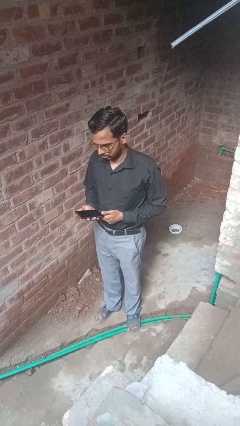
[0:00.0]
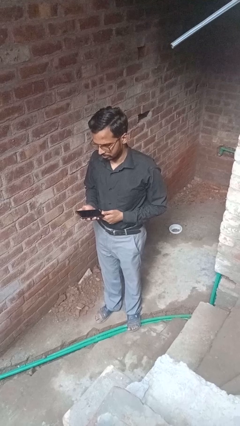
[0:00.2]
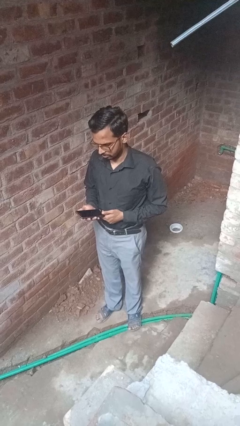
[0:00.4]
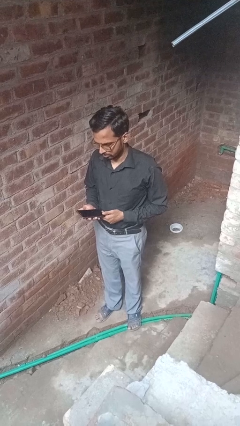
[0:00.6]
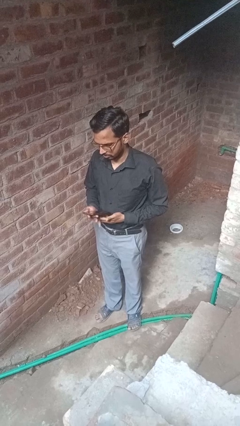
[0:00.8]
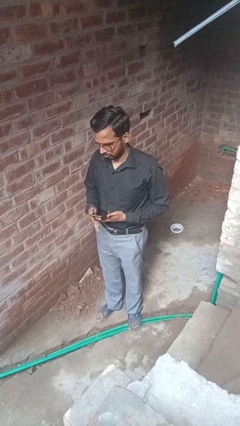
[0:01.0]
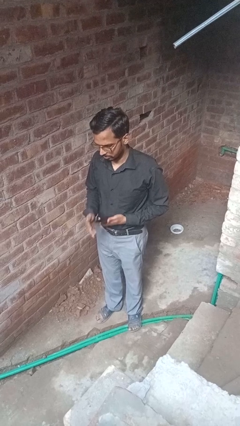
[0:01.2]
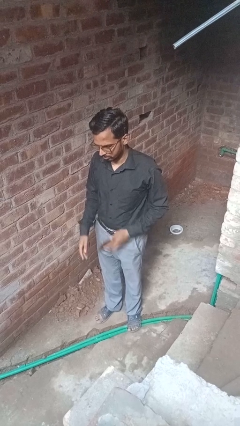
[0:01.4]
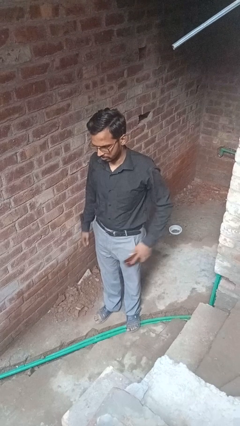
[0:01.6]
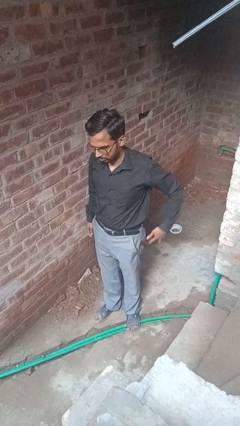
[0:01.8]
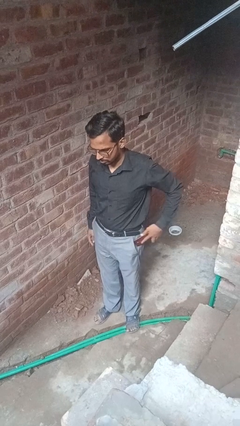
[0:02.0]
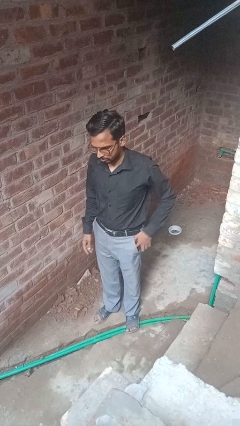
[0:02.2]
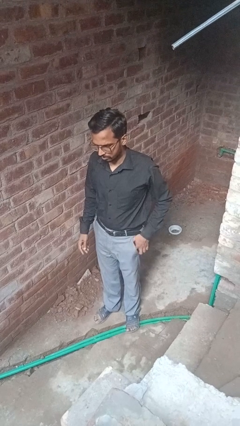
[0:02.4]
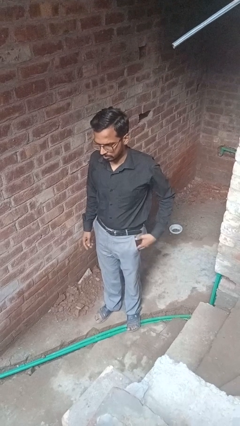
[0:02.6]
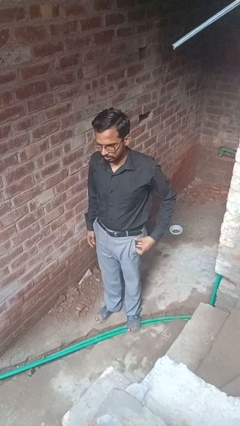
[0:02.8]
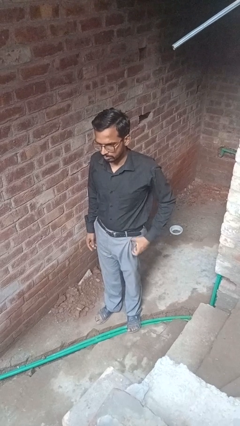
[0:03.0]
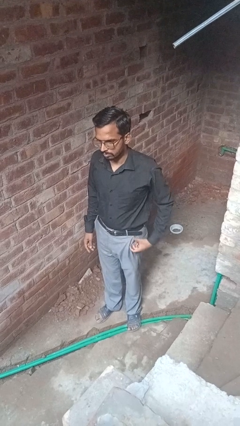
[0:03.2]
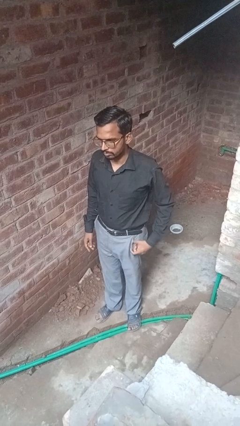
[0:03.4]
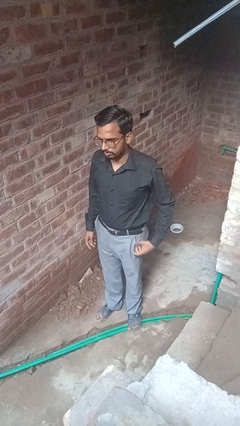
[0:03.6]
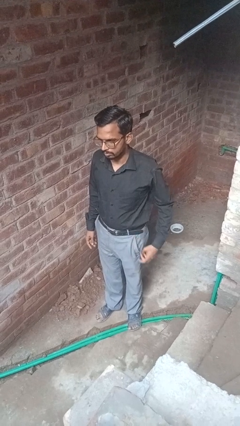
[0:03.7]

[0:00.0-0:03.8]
person puts phone into pocket

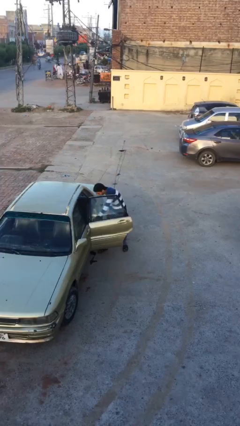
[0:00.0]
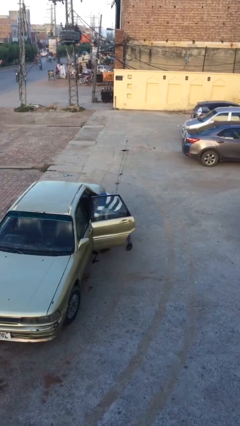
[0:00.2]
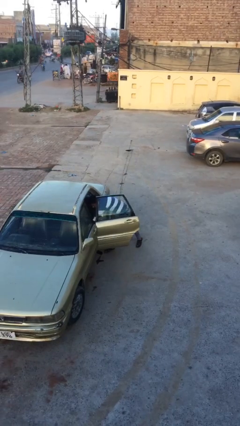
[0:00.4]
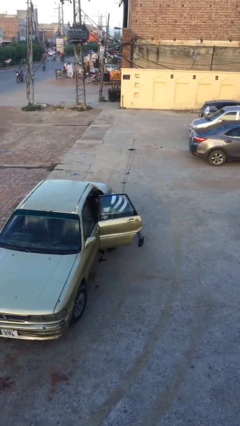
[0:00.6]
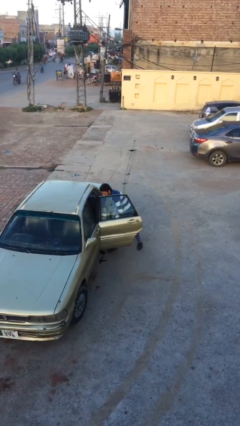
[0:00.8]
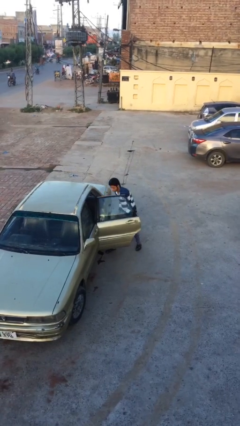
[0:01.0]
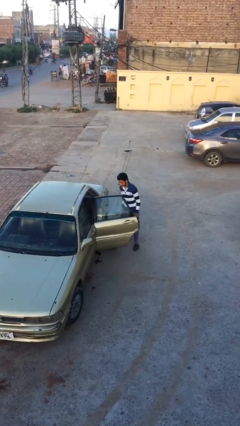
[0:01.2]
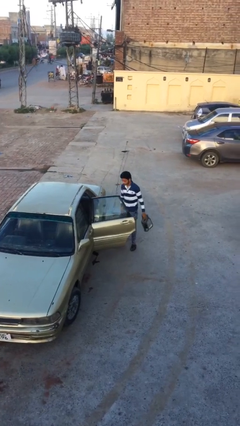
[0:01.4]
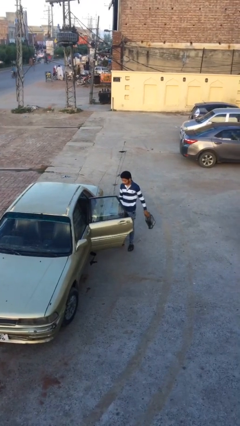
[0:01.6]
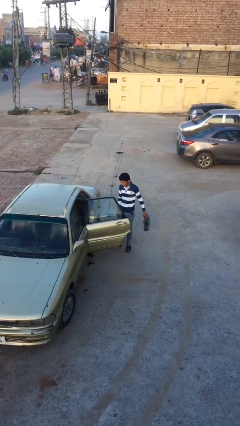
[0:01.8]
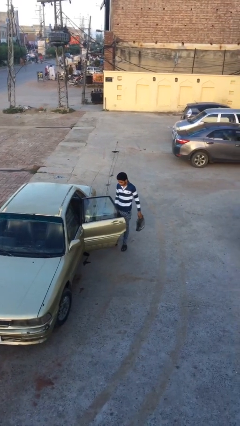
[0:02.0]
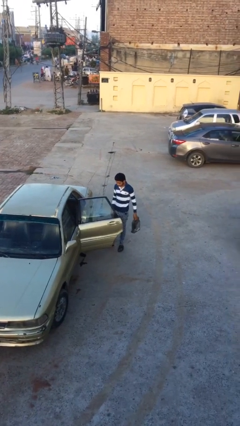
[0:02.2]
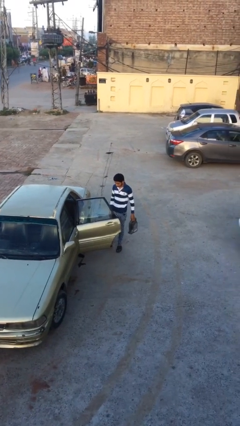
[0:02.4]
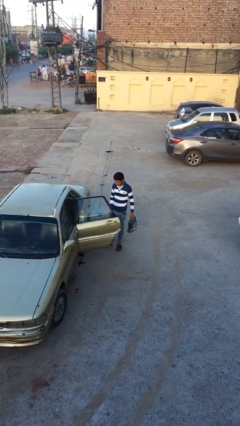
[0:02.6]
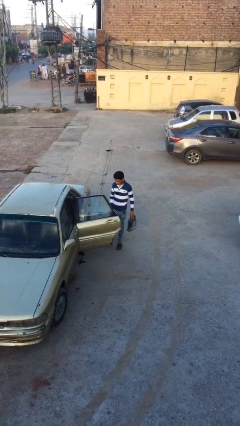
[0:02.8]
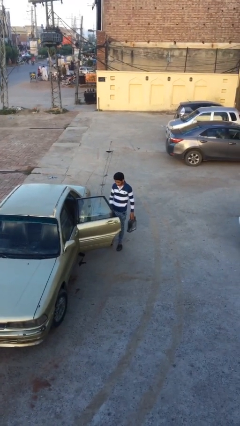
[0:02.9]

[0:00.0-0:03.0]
person unloads car

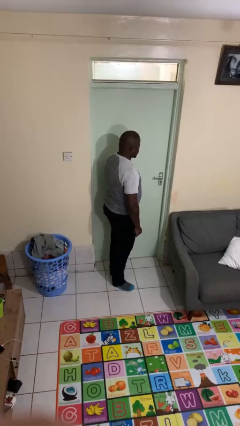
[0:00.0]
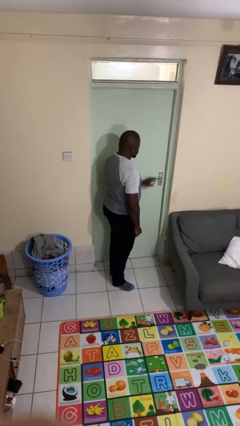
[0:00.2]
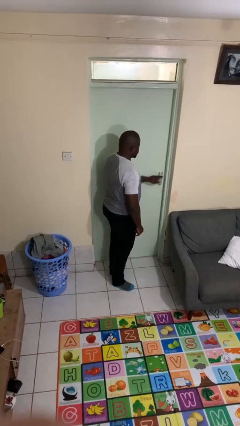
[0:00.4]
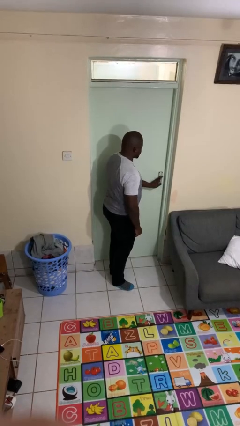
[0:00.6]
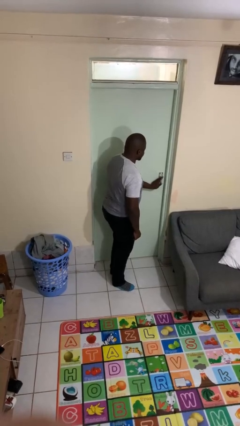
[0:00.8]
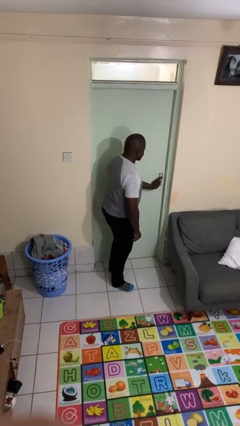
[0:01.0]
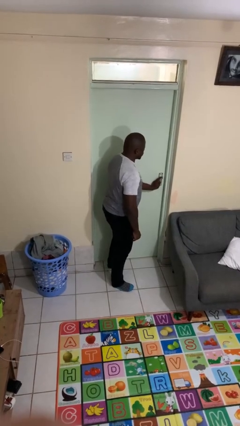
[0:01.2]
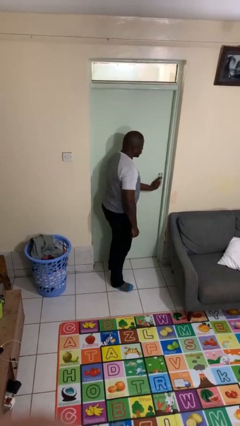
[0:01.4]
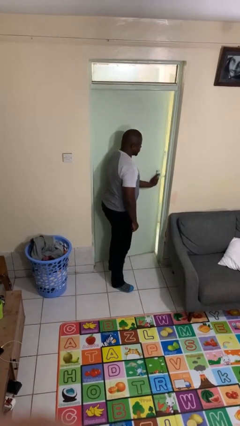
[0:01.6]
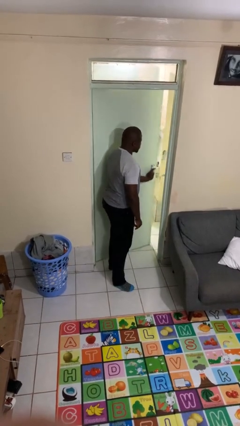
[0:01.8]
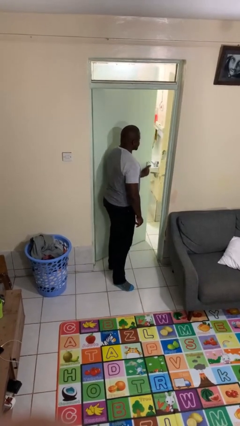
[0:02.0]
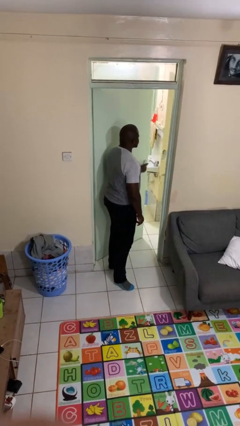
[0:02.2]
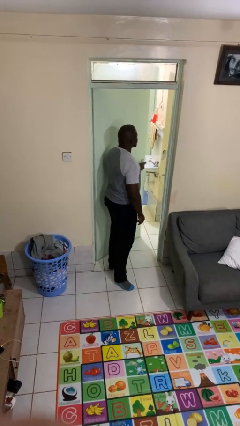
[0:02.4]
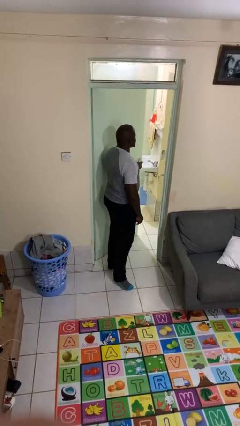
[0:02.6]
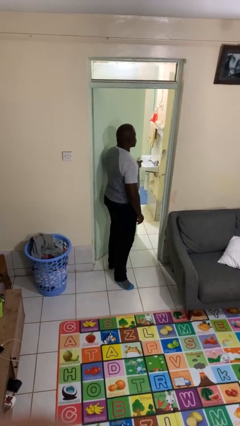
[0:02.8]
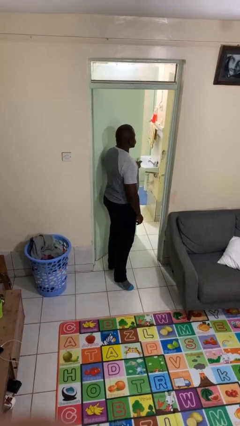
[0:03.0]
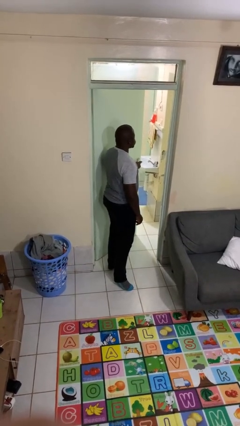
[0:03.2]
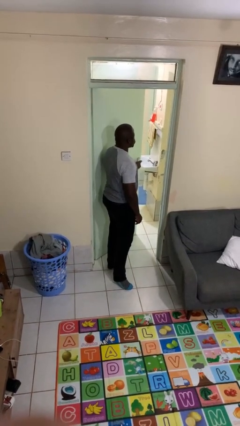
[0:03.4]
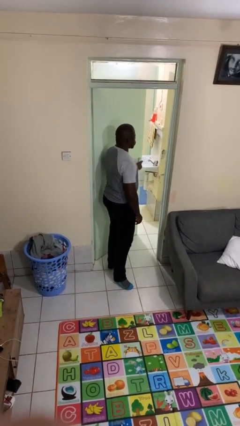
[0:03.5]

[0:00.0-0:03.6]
person opens facility door

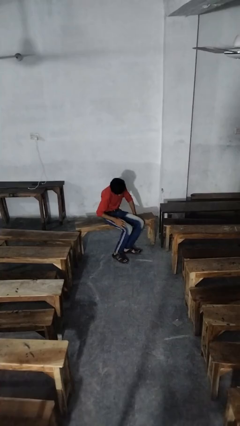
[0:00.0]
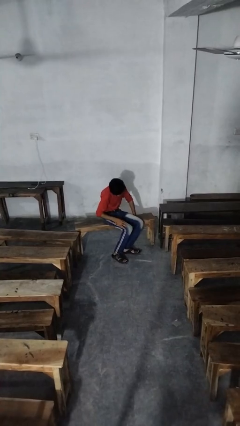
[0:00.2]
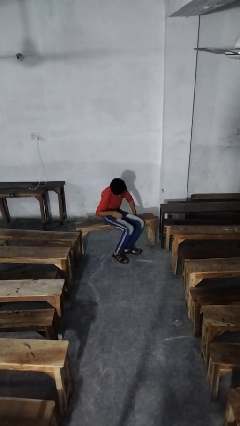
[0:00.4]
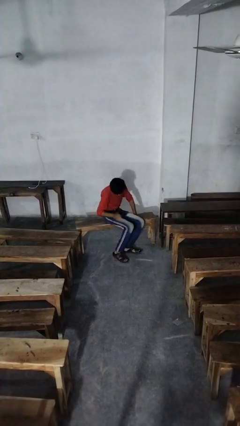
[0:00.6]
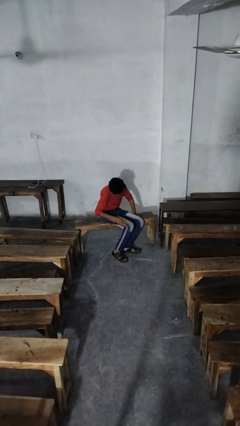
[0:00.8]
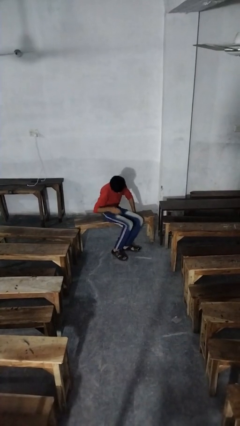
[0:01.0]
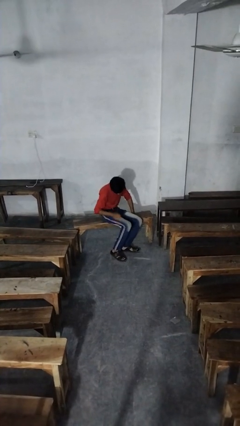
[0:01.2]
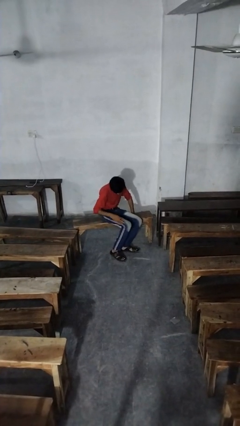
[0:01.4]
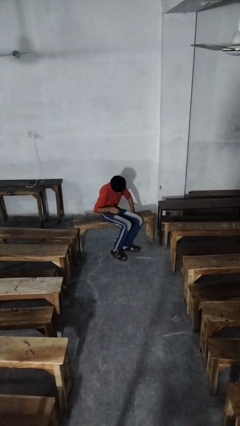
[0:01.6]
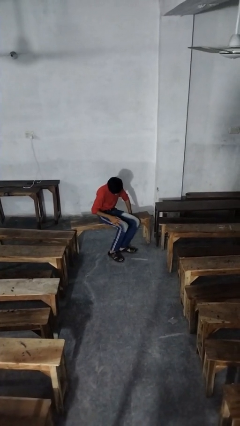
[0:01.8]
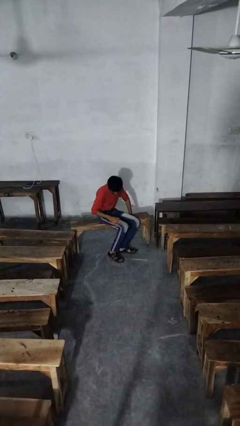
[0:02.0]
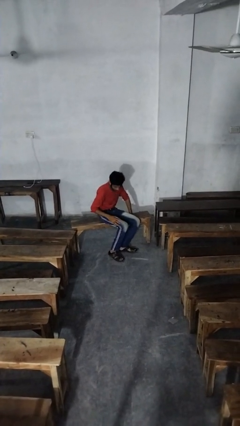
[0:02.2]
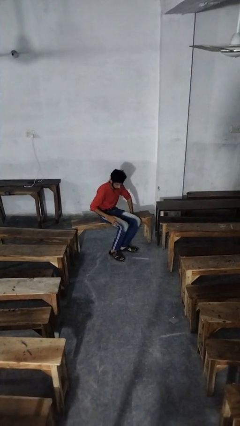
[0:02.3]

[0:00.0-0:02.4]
person slaps hands on thighs

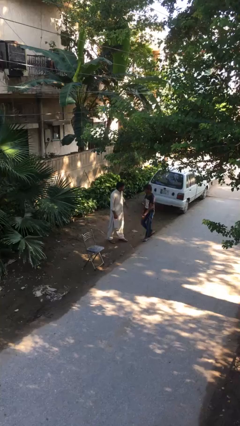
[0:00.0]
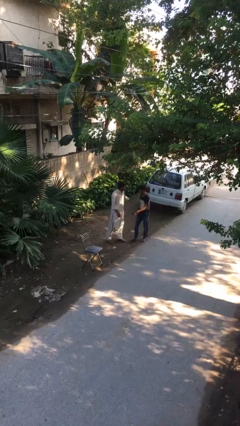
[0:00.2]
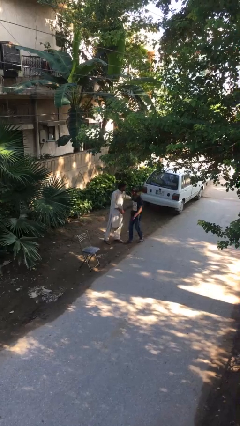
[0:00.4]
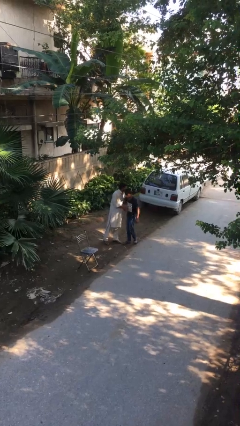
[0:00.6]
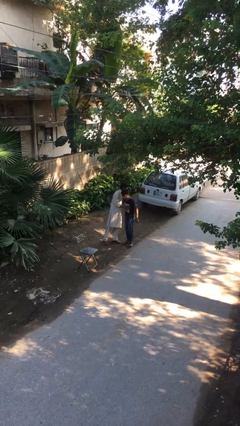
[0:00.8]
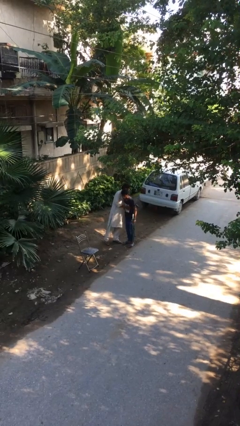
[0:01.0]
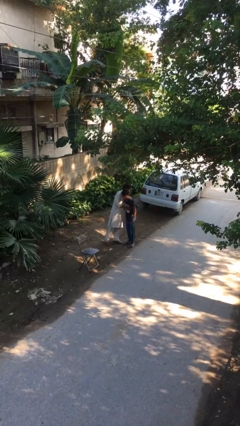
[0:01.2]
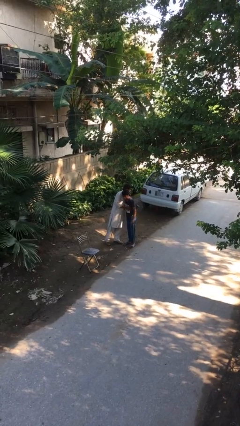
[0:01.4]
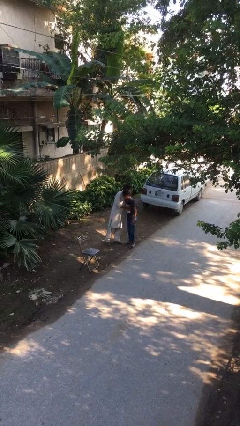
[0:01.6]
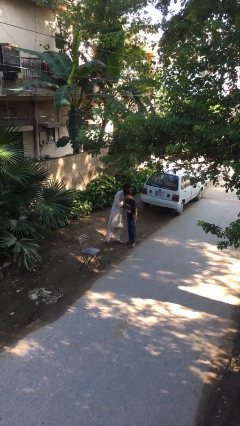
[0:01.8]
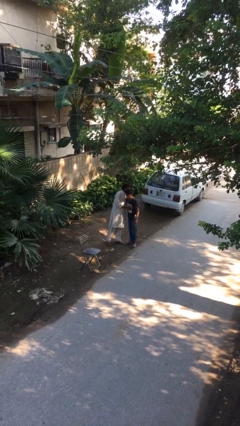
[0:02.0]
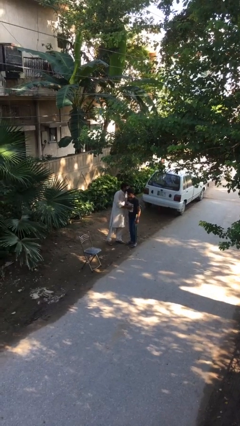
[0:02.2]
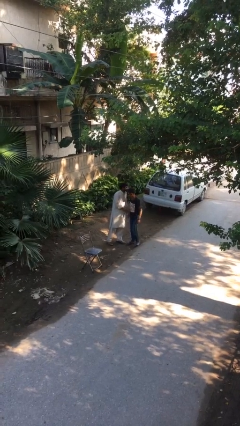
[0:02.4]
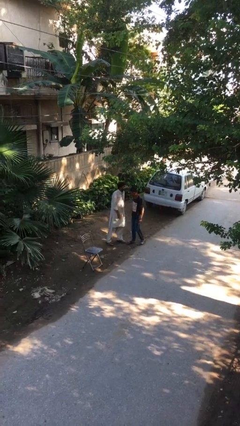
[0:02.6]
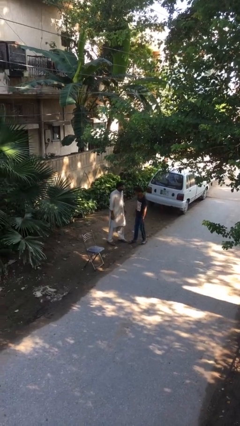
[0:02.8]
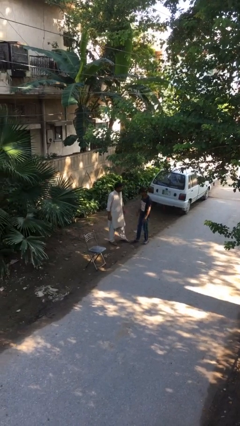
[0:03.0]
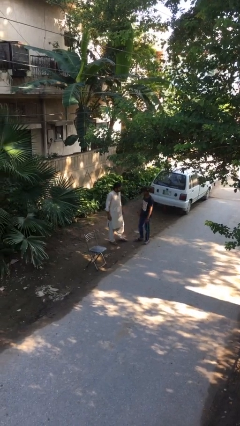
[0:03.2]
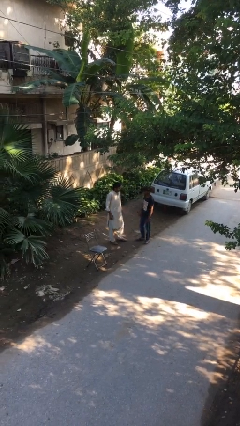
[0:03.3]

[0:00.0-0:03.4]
person embraces person

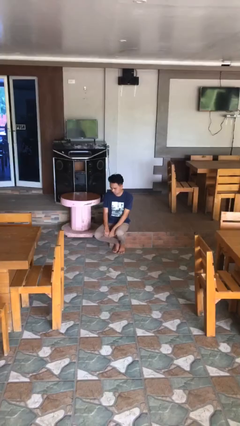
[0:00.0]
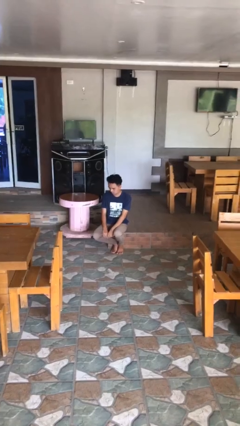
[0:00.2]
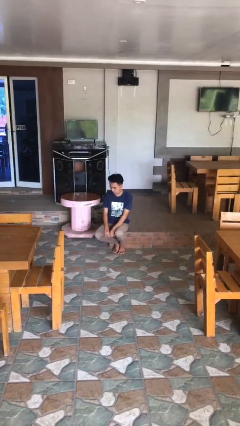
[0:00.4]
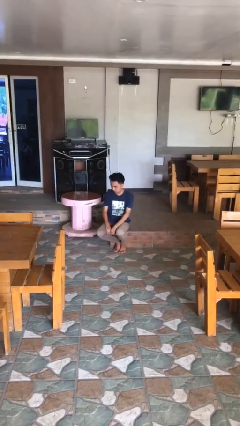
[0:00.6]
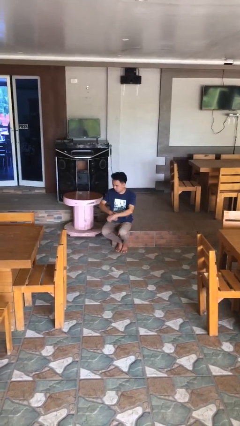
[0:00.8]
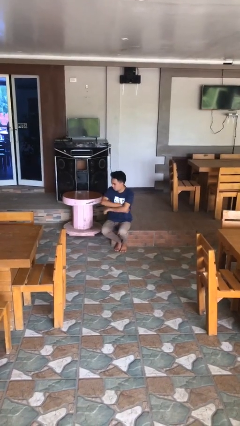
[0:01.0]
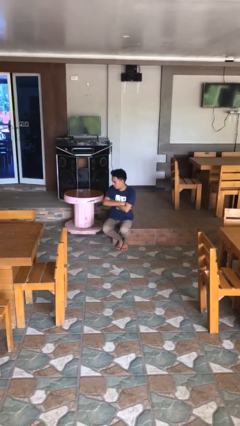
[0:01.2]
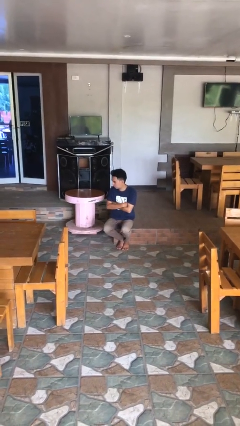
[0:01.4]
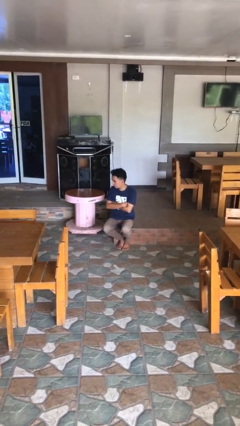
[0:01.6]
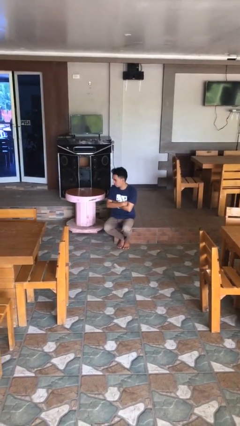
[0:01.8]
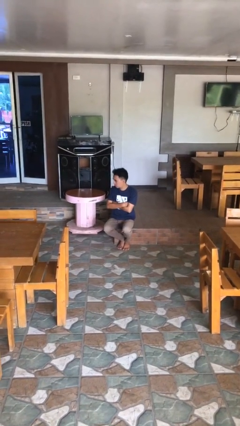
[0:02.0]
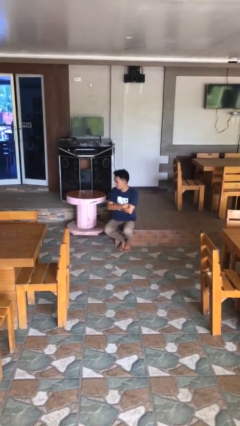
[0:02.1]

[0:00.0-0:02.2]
person crosses arms
